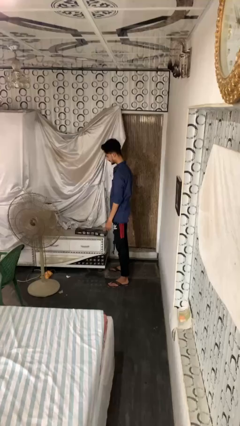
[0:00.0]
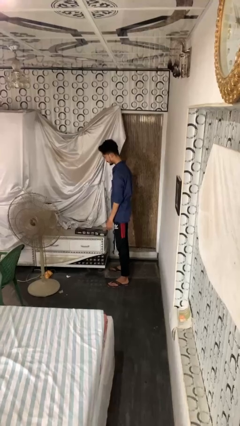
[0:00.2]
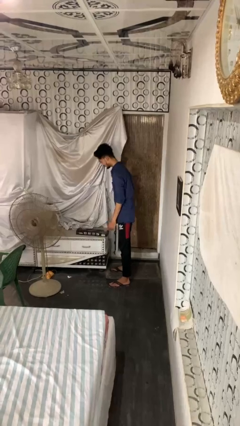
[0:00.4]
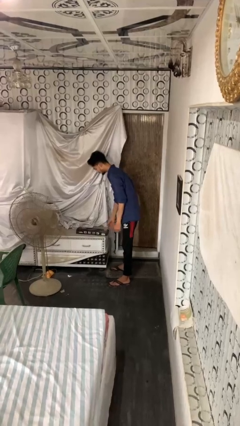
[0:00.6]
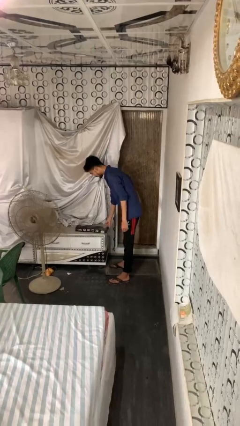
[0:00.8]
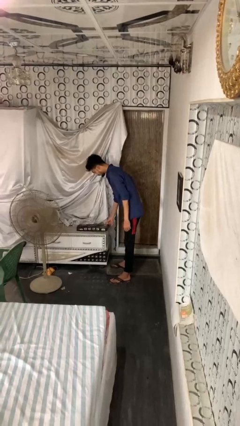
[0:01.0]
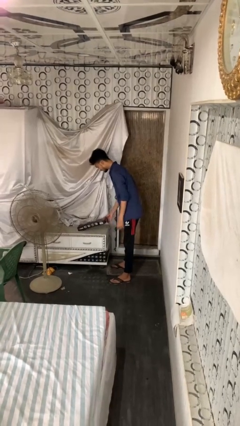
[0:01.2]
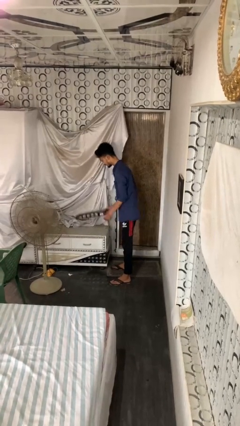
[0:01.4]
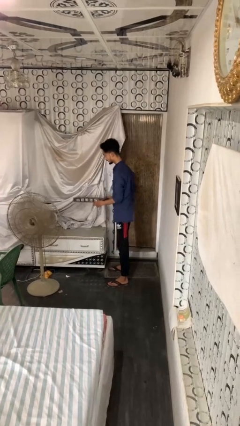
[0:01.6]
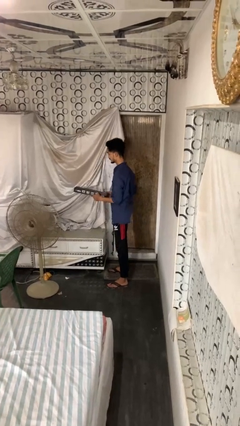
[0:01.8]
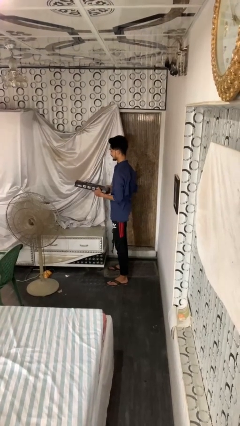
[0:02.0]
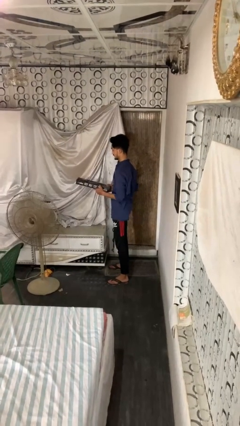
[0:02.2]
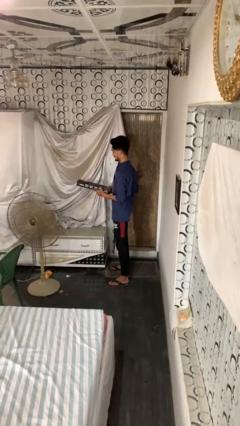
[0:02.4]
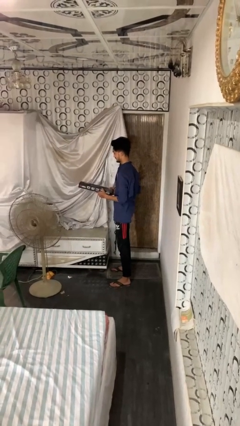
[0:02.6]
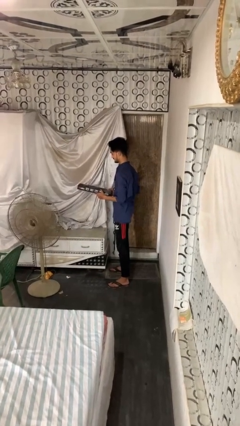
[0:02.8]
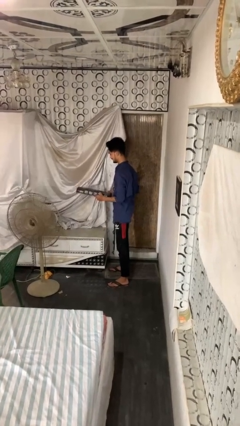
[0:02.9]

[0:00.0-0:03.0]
person picks up object from countertop

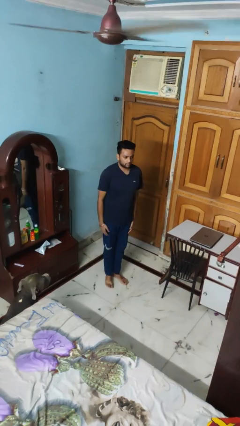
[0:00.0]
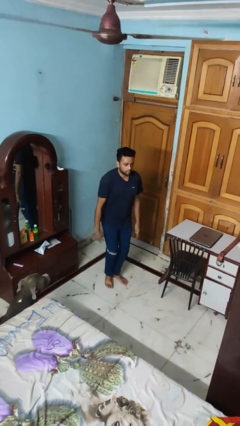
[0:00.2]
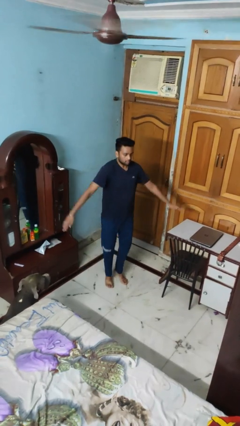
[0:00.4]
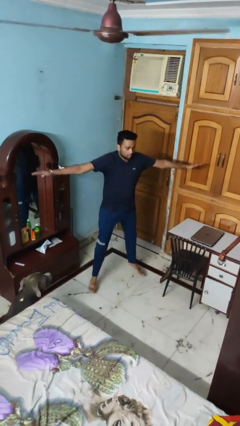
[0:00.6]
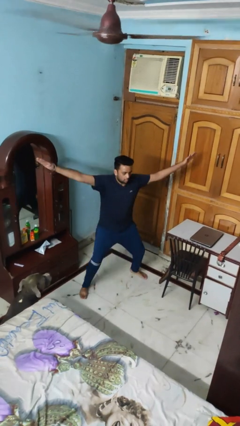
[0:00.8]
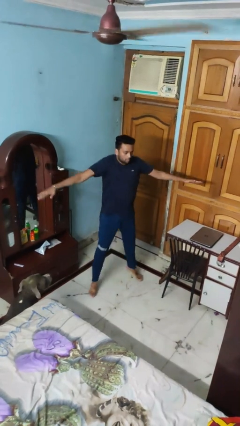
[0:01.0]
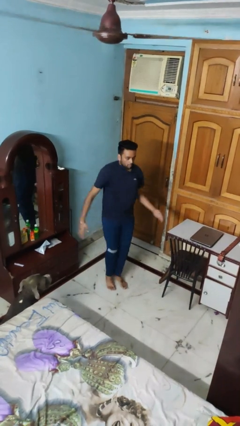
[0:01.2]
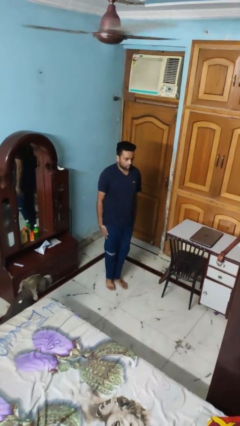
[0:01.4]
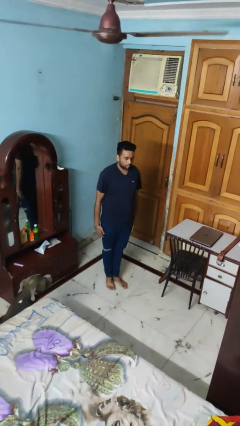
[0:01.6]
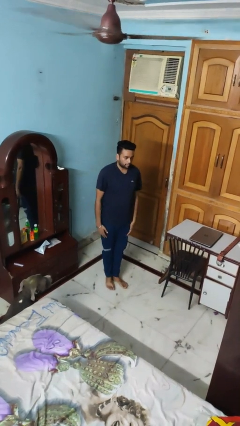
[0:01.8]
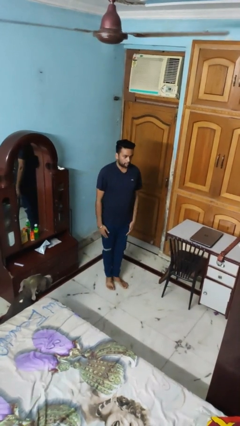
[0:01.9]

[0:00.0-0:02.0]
person exercises with jumping jacks

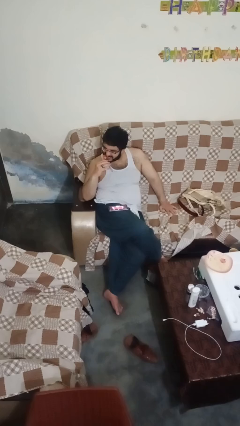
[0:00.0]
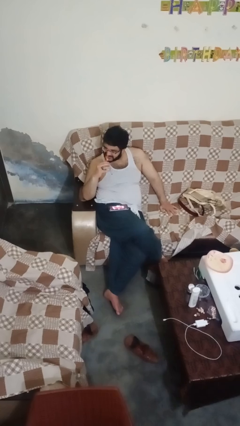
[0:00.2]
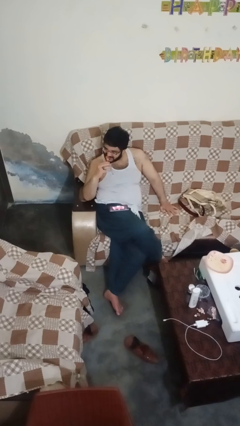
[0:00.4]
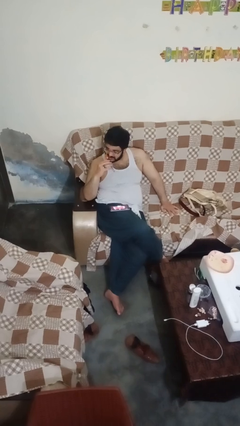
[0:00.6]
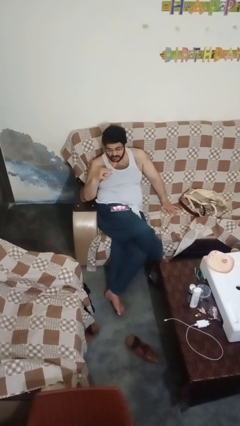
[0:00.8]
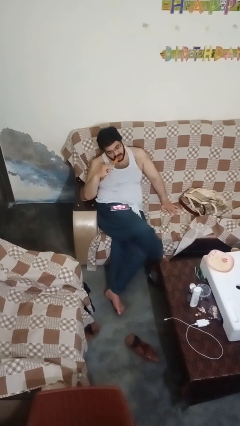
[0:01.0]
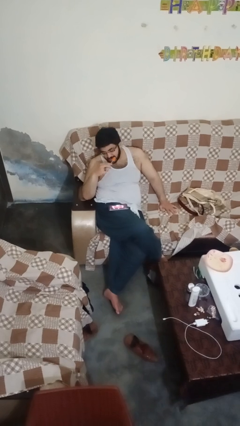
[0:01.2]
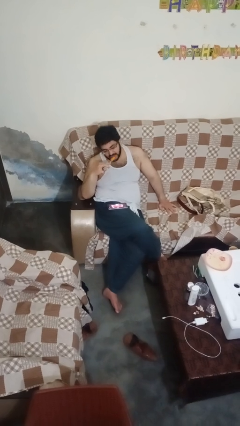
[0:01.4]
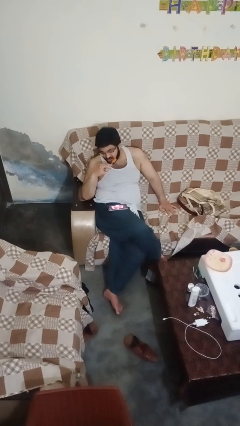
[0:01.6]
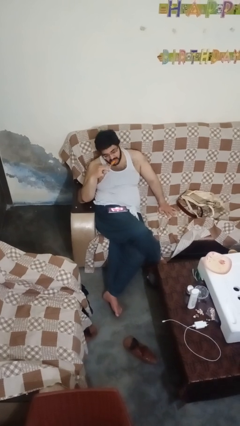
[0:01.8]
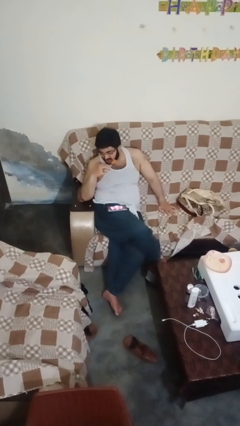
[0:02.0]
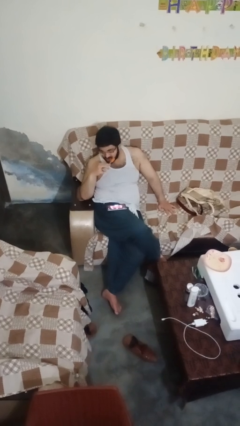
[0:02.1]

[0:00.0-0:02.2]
person brushes teeth

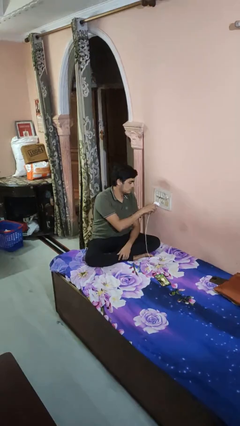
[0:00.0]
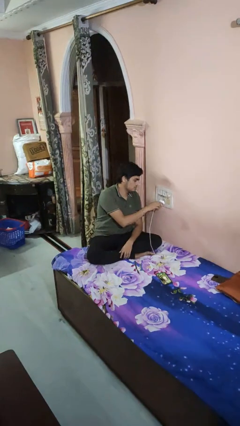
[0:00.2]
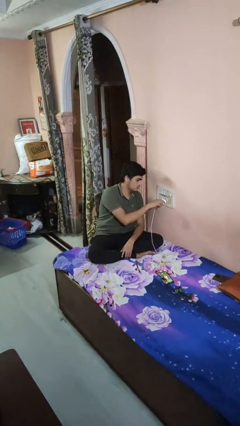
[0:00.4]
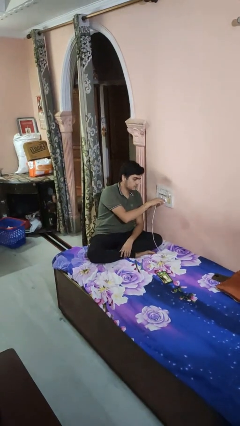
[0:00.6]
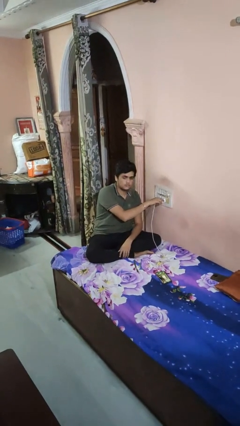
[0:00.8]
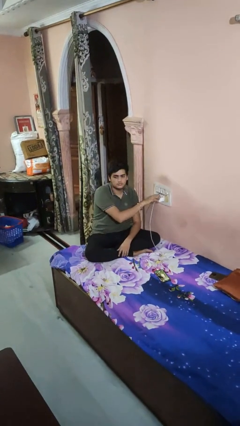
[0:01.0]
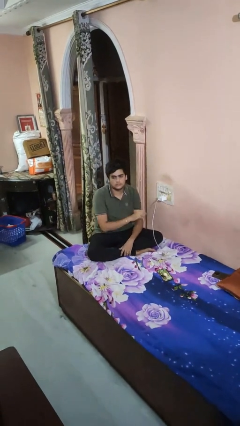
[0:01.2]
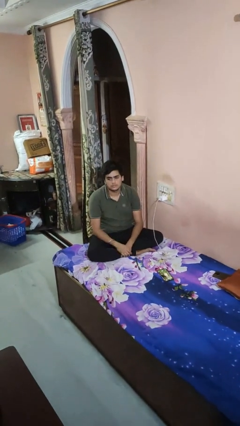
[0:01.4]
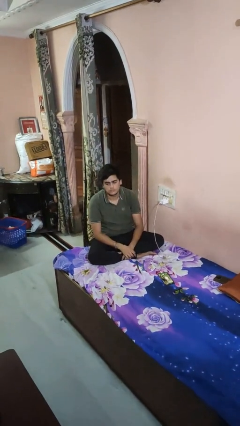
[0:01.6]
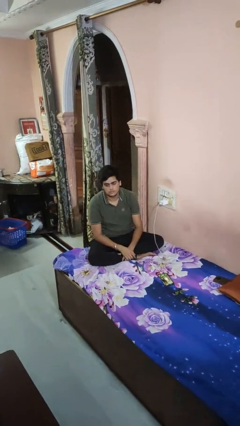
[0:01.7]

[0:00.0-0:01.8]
person plugs into electrical socket

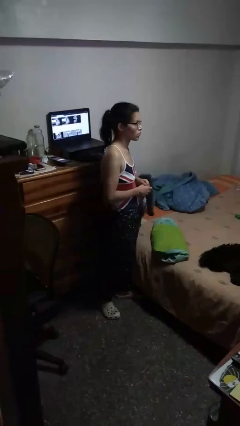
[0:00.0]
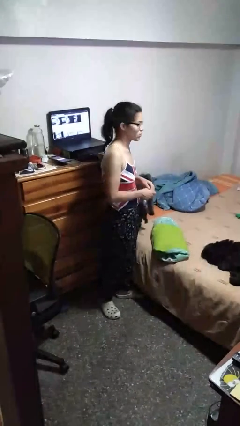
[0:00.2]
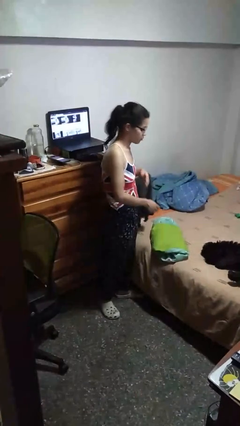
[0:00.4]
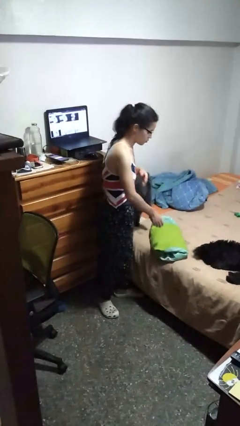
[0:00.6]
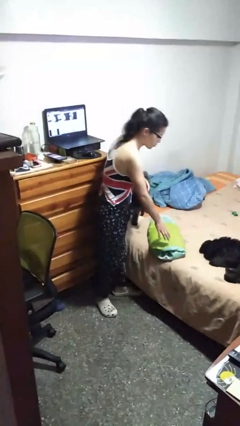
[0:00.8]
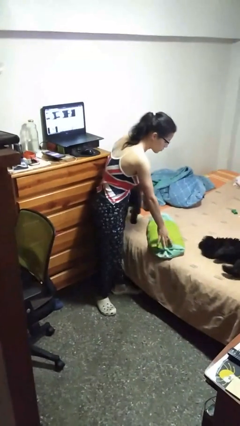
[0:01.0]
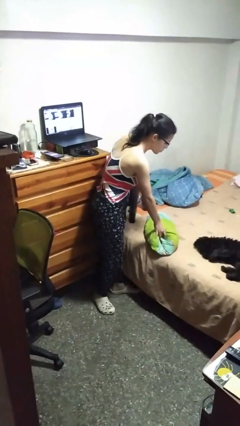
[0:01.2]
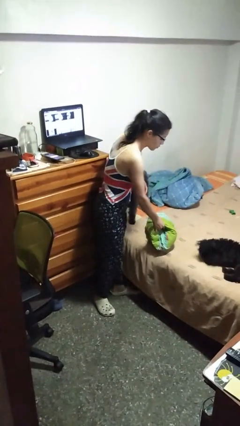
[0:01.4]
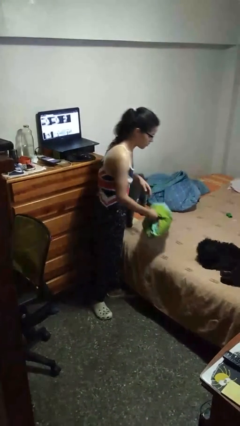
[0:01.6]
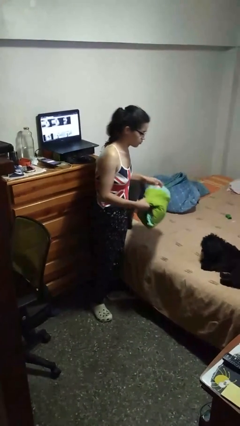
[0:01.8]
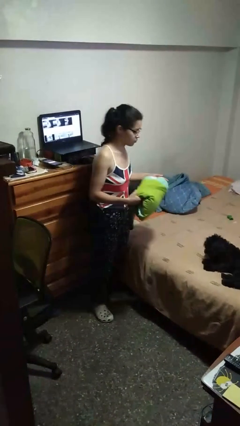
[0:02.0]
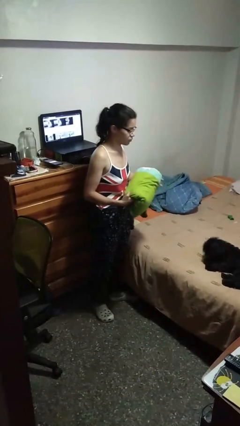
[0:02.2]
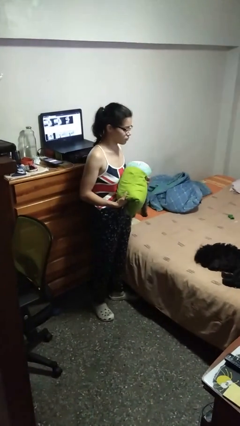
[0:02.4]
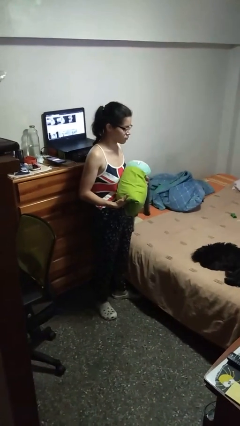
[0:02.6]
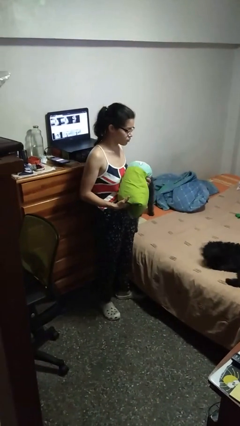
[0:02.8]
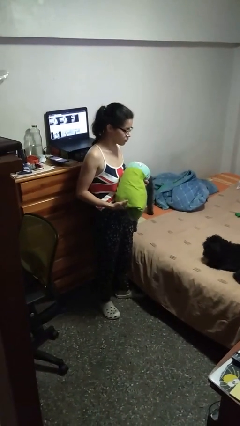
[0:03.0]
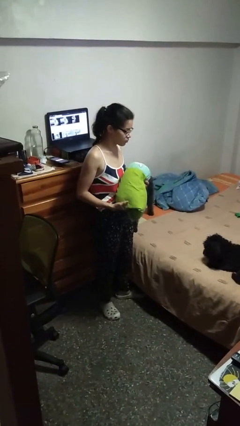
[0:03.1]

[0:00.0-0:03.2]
person picks up object from bed

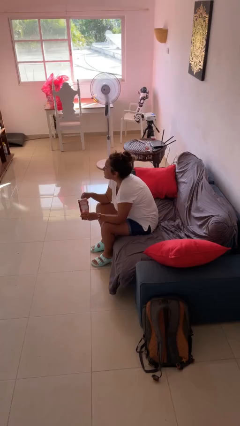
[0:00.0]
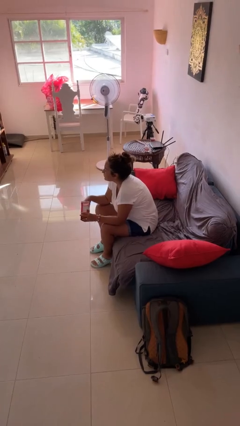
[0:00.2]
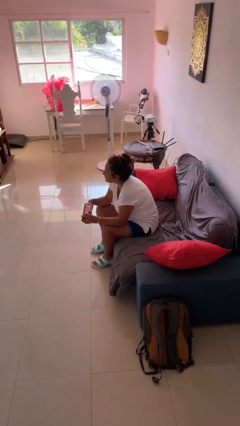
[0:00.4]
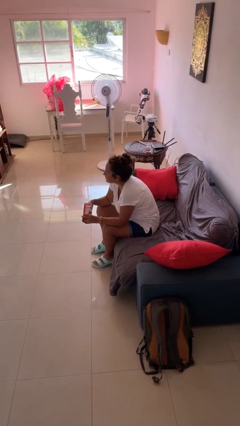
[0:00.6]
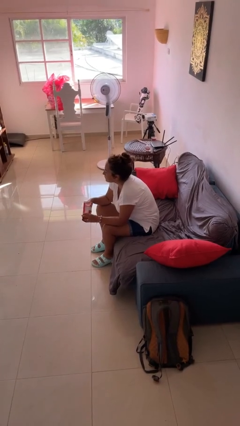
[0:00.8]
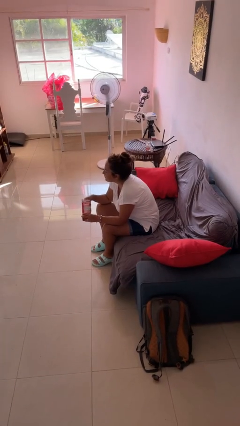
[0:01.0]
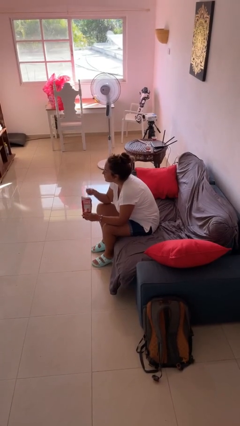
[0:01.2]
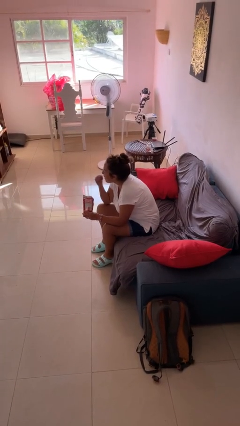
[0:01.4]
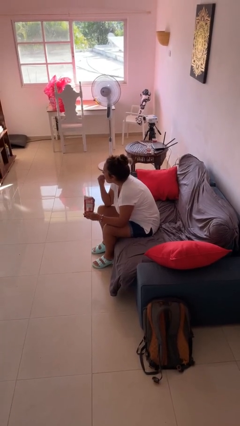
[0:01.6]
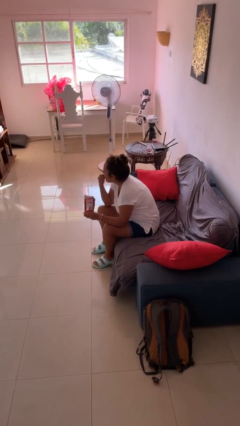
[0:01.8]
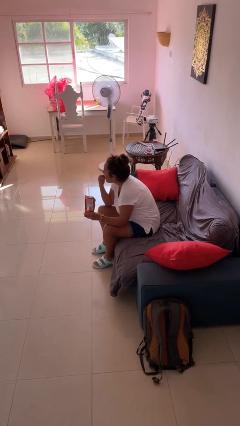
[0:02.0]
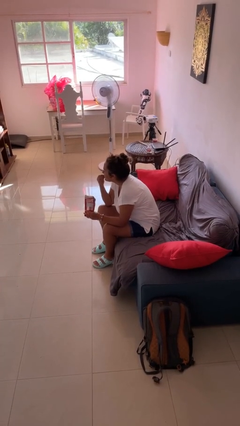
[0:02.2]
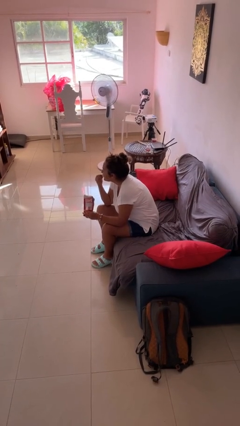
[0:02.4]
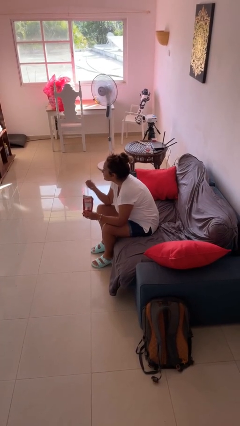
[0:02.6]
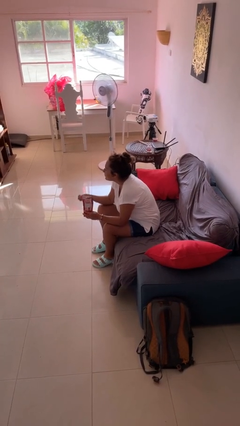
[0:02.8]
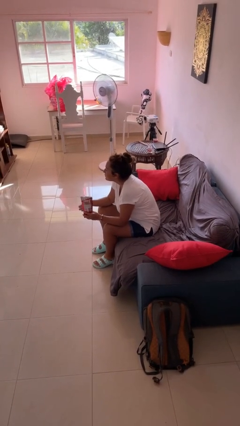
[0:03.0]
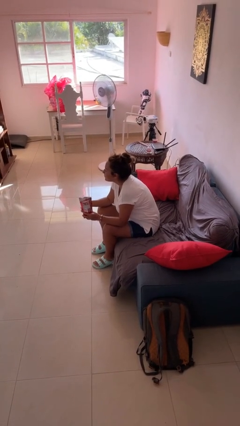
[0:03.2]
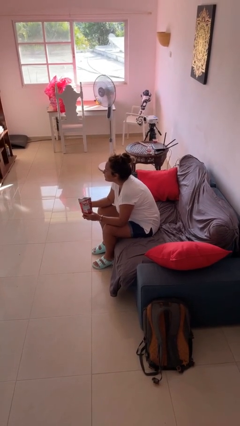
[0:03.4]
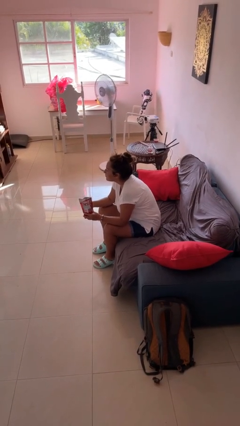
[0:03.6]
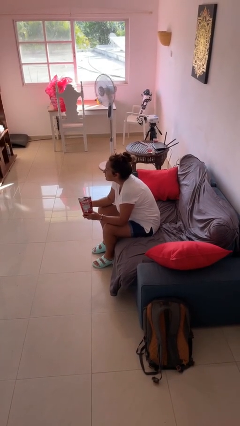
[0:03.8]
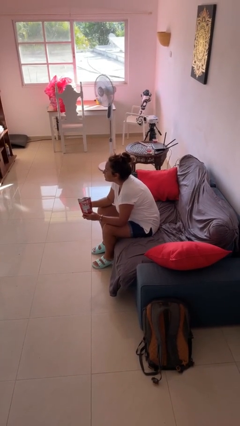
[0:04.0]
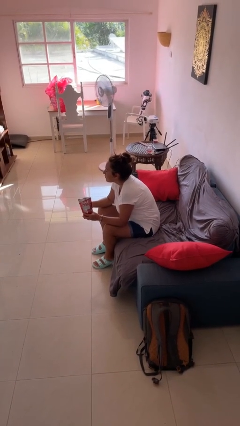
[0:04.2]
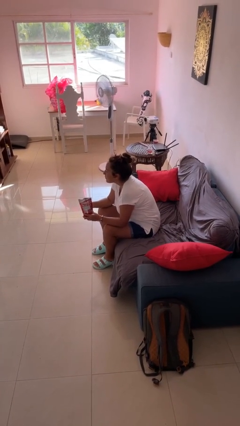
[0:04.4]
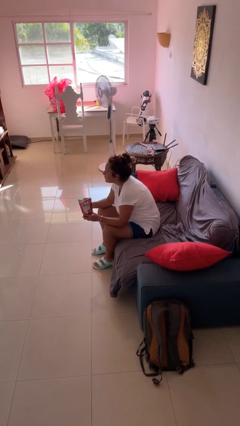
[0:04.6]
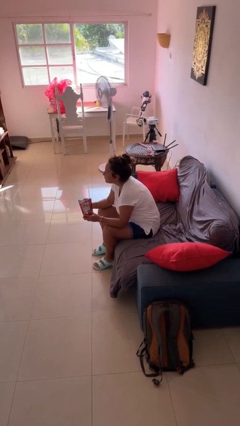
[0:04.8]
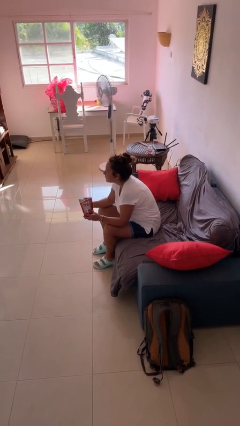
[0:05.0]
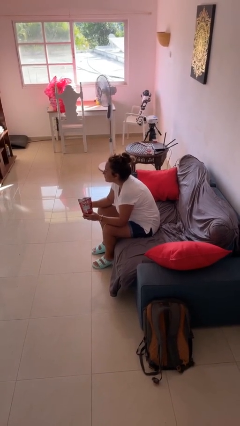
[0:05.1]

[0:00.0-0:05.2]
person eats snack from bag

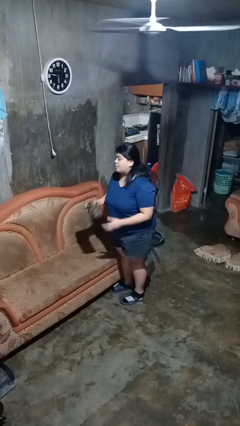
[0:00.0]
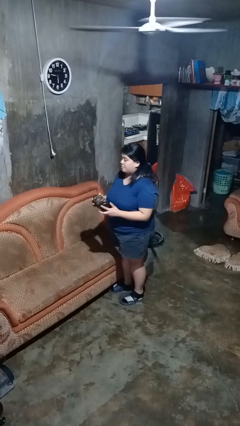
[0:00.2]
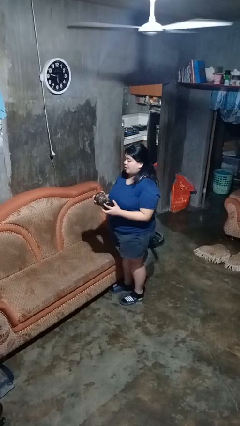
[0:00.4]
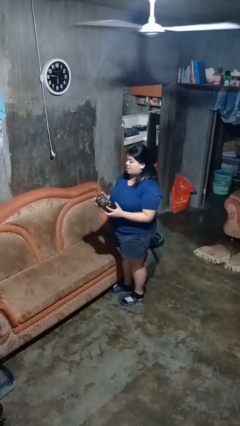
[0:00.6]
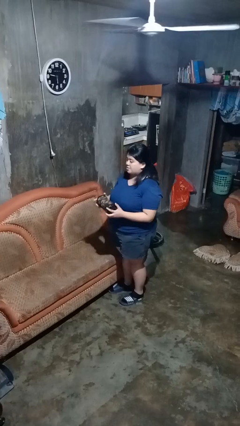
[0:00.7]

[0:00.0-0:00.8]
person picks up object from couch
